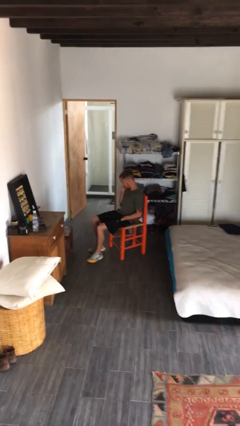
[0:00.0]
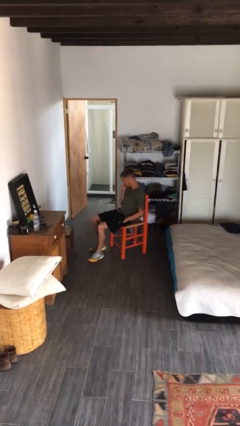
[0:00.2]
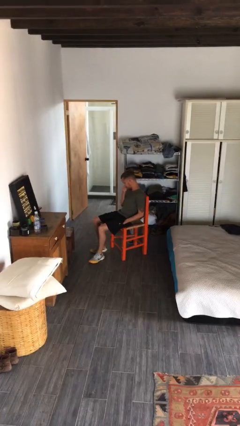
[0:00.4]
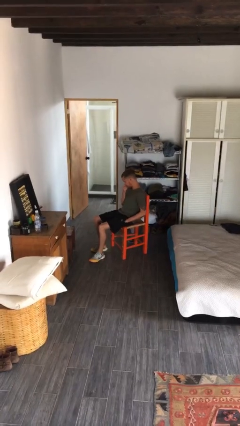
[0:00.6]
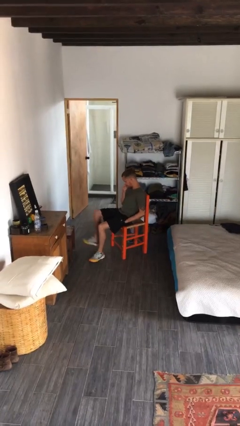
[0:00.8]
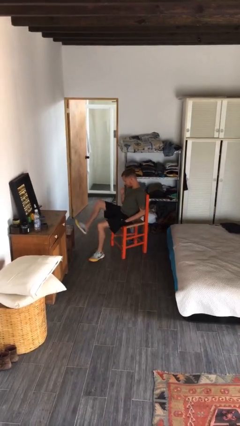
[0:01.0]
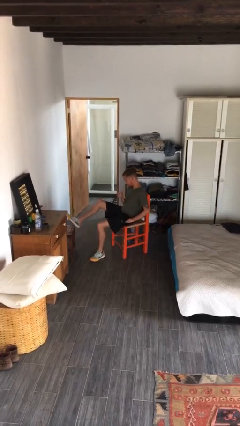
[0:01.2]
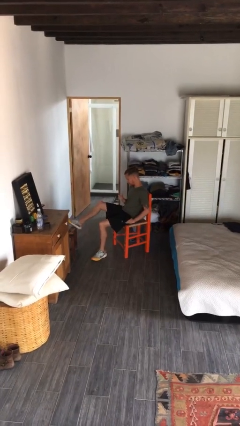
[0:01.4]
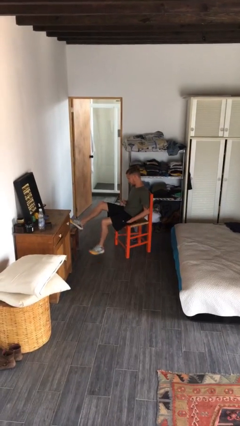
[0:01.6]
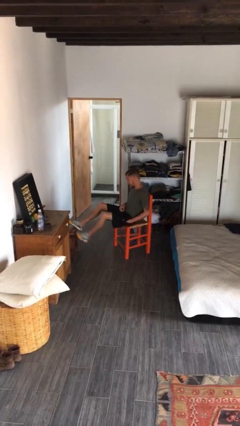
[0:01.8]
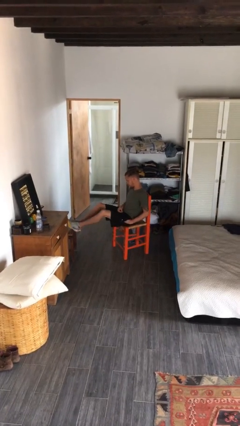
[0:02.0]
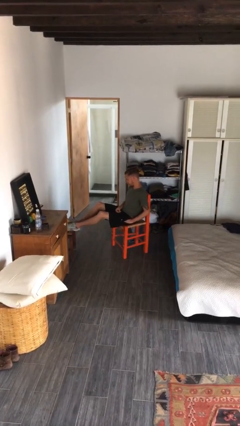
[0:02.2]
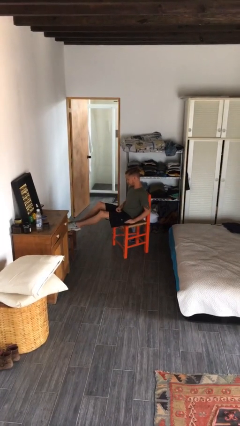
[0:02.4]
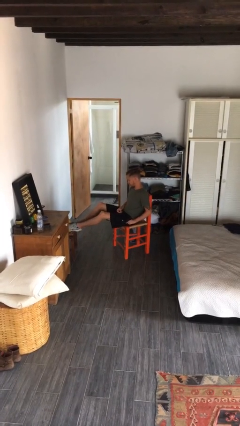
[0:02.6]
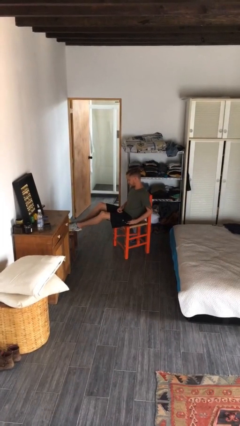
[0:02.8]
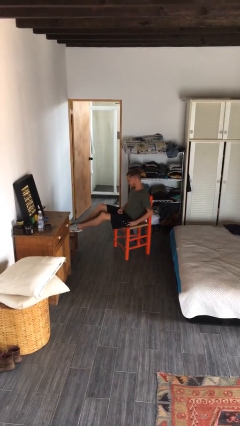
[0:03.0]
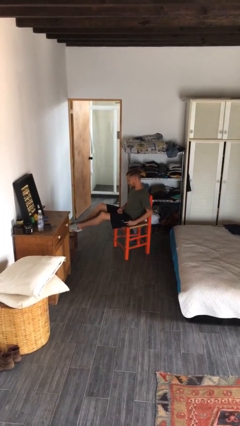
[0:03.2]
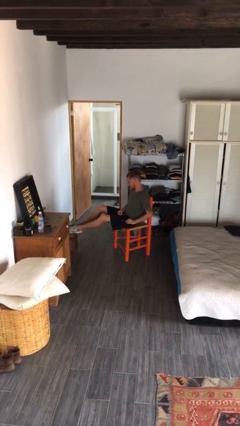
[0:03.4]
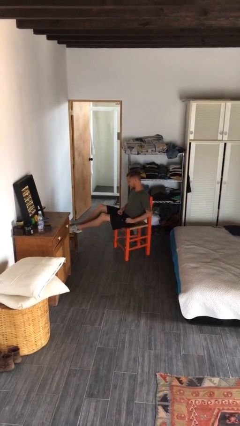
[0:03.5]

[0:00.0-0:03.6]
person puts feet up

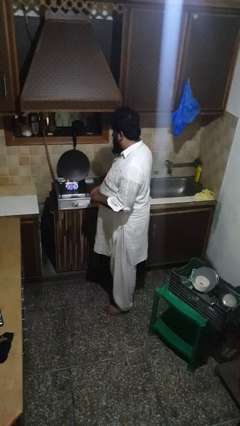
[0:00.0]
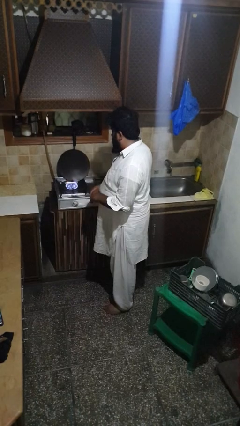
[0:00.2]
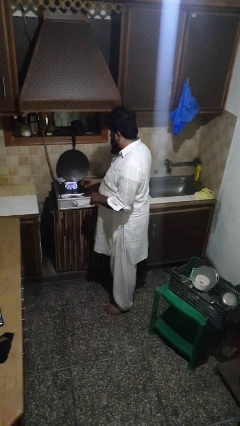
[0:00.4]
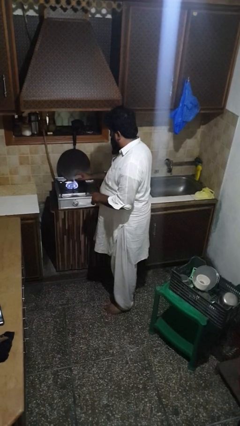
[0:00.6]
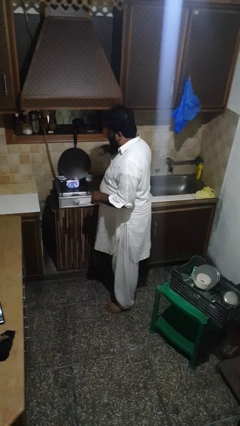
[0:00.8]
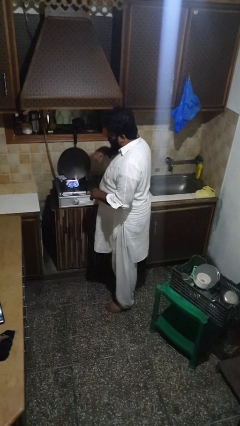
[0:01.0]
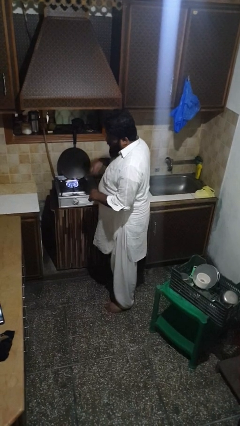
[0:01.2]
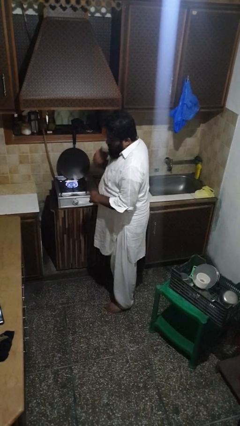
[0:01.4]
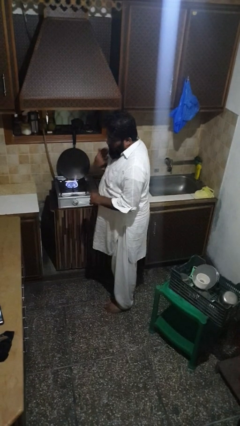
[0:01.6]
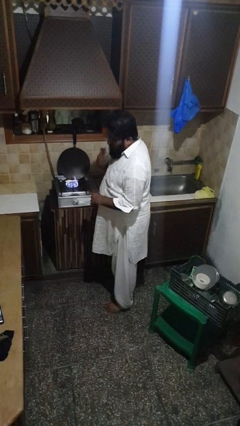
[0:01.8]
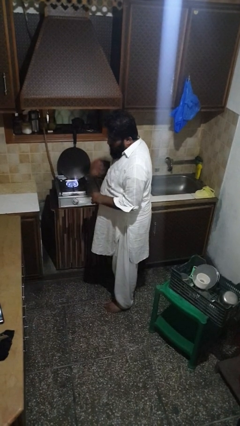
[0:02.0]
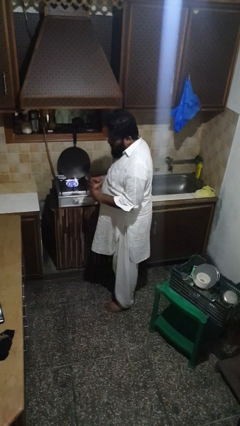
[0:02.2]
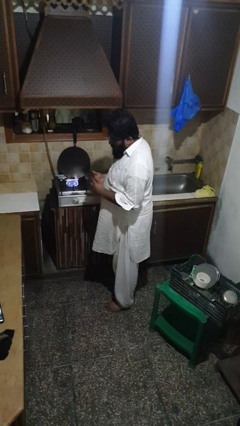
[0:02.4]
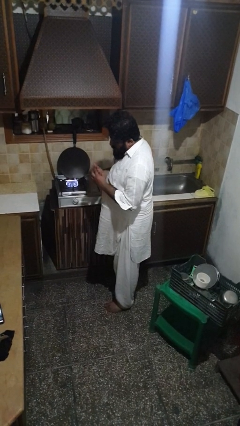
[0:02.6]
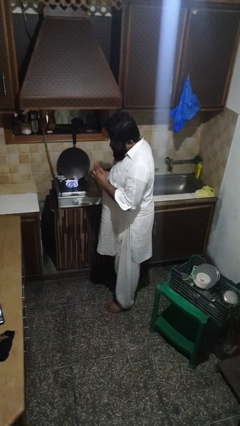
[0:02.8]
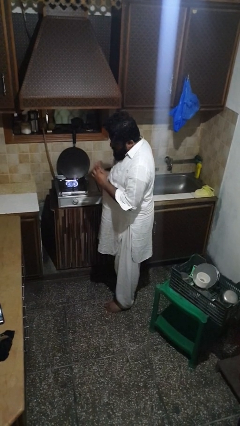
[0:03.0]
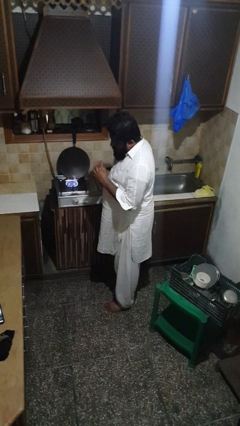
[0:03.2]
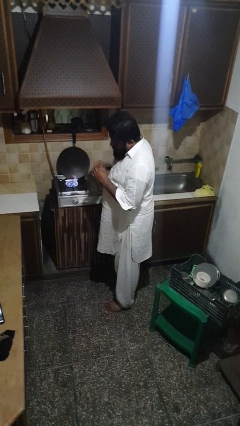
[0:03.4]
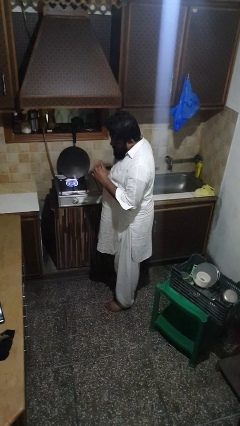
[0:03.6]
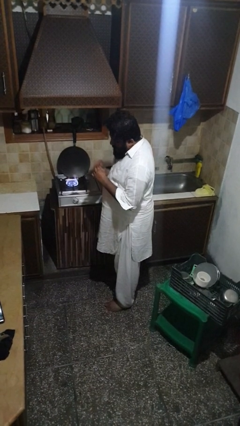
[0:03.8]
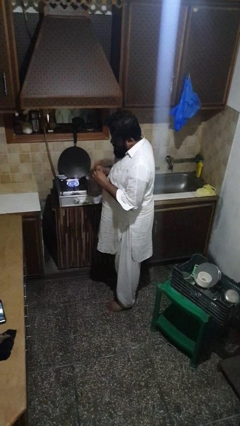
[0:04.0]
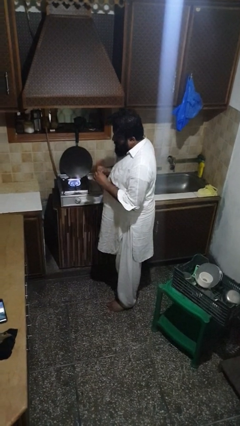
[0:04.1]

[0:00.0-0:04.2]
person burns hand

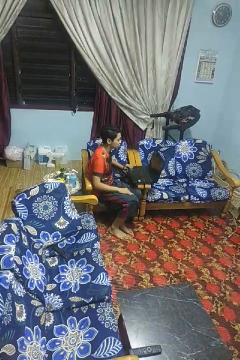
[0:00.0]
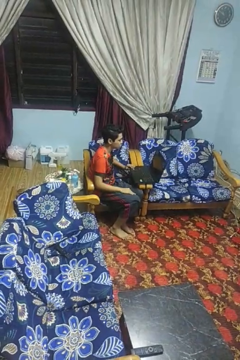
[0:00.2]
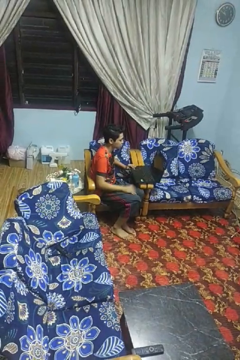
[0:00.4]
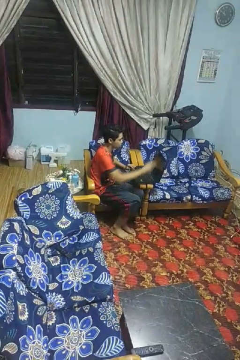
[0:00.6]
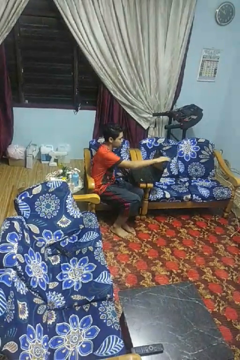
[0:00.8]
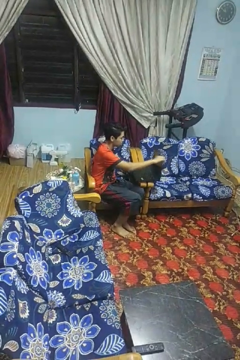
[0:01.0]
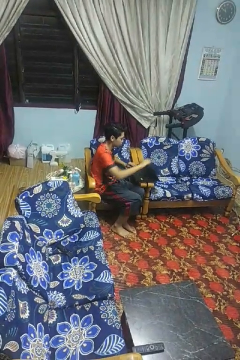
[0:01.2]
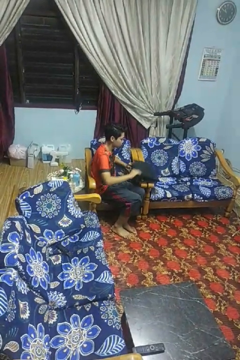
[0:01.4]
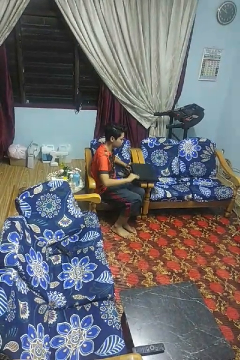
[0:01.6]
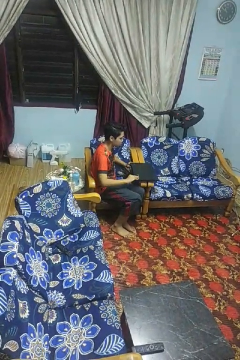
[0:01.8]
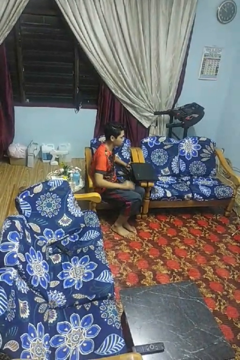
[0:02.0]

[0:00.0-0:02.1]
person closes laptop

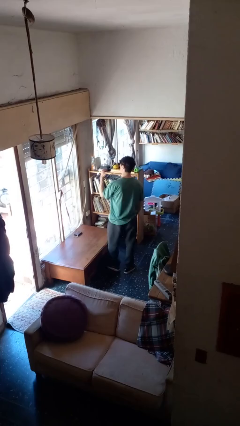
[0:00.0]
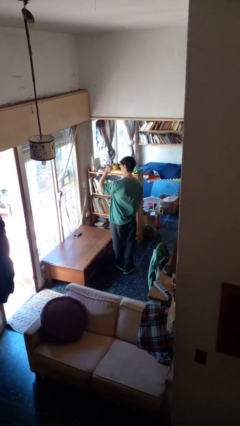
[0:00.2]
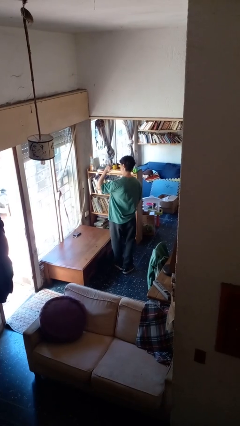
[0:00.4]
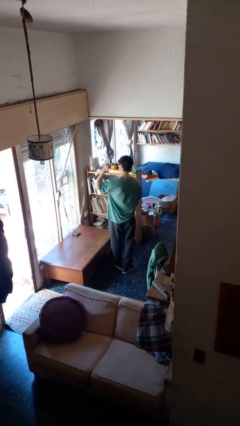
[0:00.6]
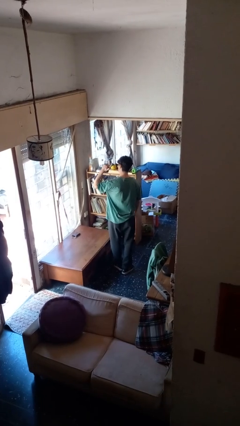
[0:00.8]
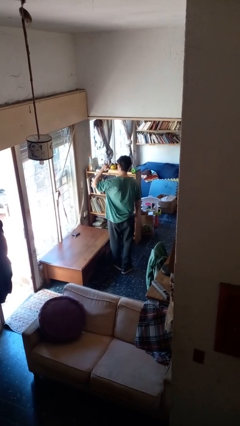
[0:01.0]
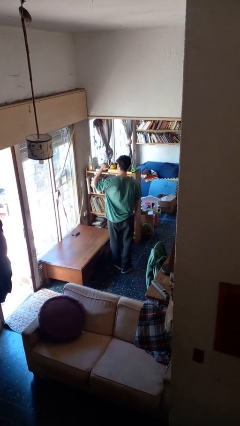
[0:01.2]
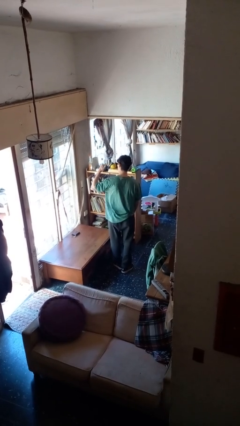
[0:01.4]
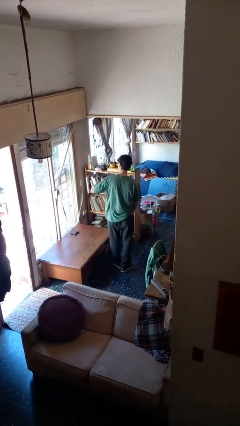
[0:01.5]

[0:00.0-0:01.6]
person gestures behind me

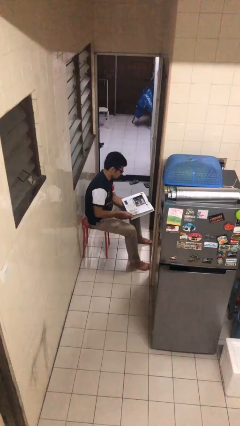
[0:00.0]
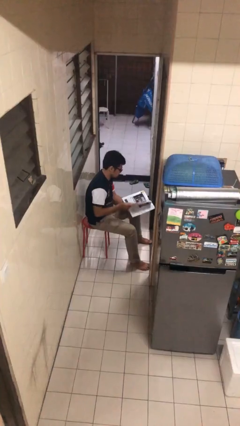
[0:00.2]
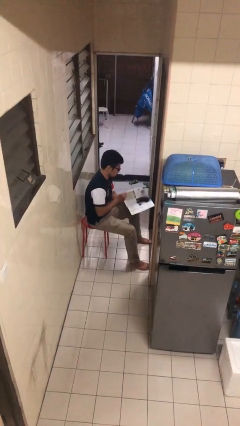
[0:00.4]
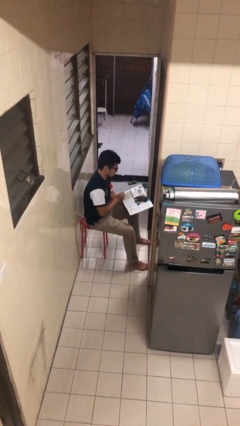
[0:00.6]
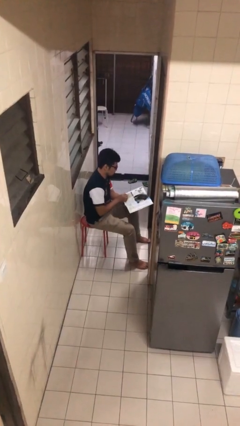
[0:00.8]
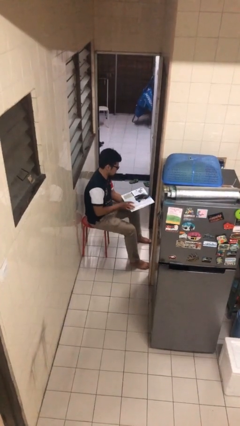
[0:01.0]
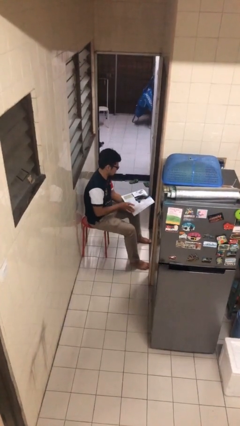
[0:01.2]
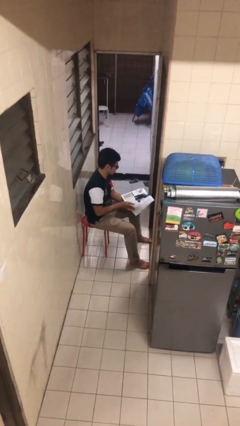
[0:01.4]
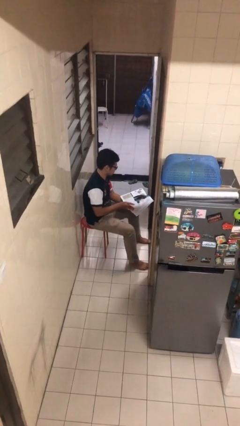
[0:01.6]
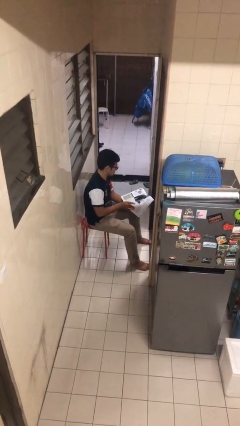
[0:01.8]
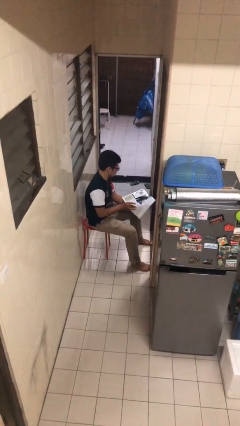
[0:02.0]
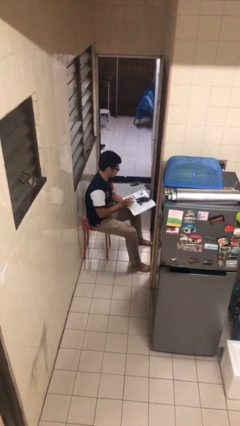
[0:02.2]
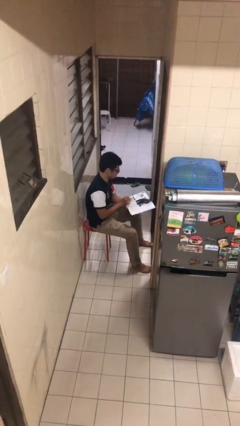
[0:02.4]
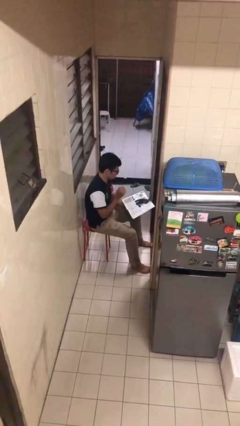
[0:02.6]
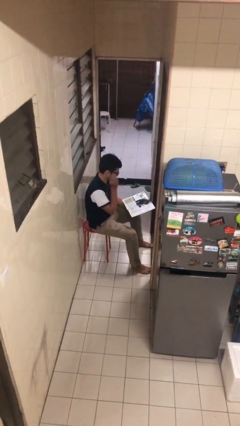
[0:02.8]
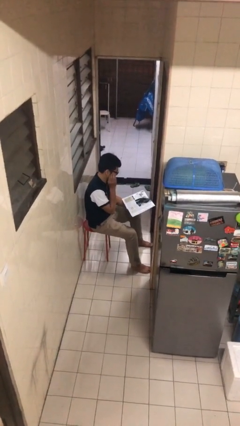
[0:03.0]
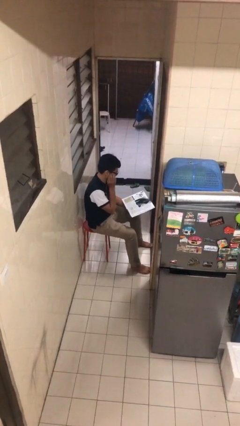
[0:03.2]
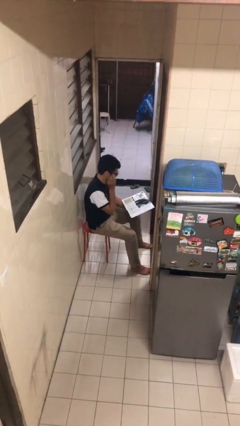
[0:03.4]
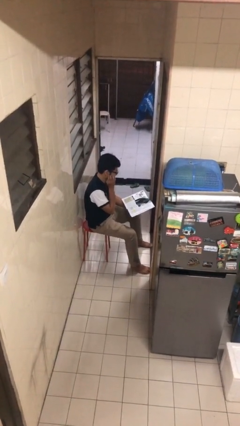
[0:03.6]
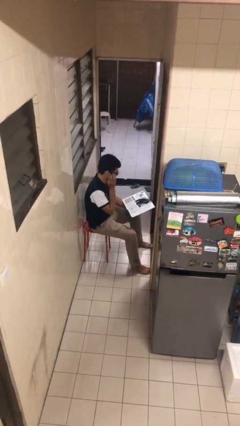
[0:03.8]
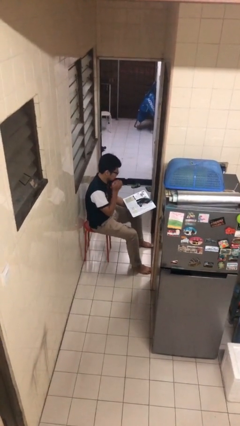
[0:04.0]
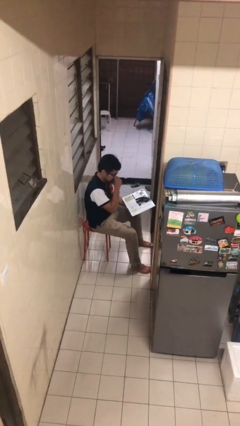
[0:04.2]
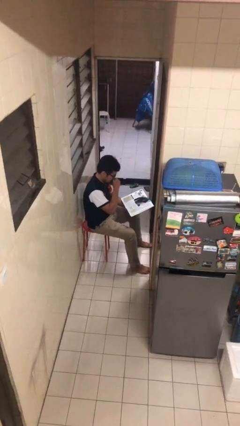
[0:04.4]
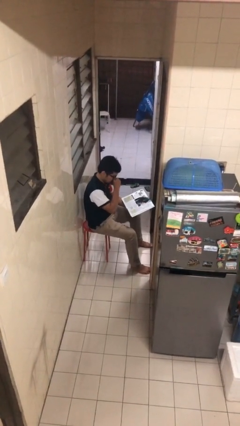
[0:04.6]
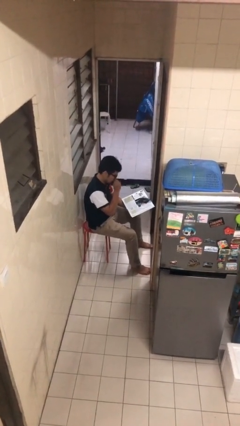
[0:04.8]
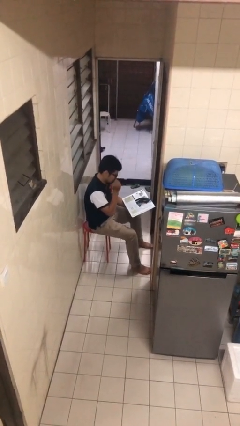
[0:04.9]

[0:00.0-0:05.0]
person reads document

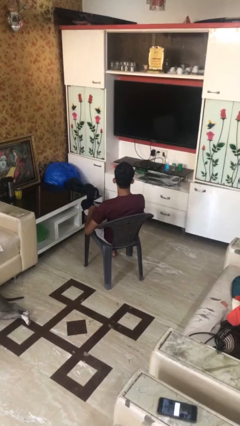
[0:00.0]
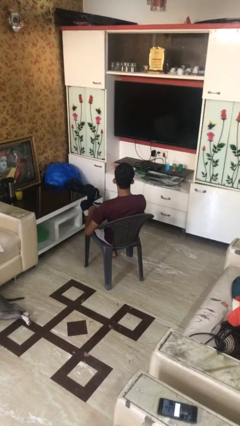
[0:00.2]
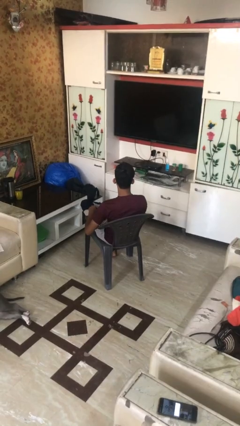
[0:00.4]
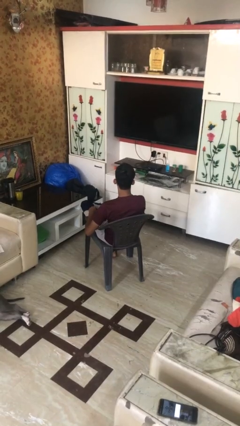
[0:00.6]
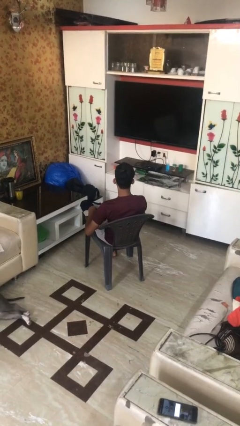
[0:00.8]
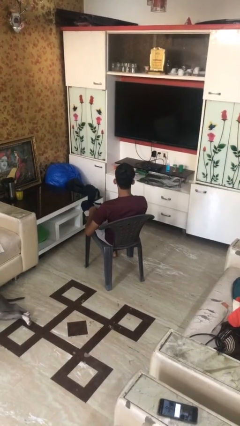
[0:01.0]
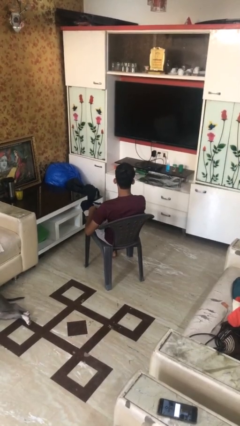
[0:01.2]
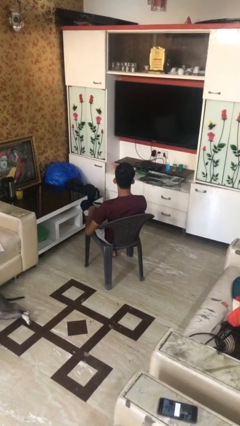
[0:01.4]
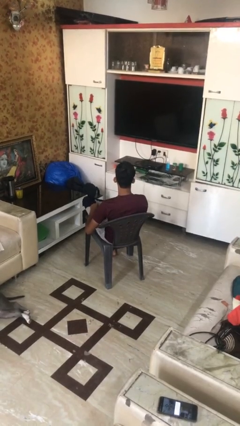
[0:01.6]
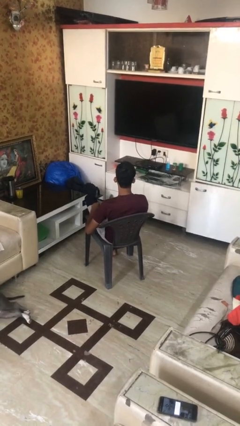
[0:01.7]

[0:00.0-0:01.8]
person rubs foot
